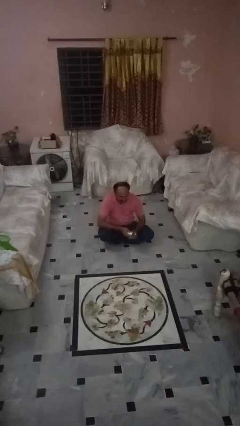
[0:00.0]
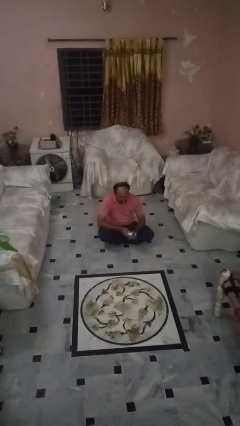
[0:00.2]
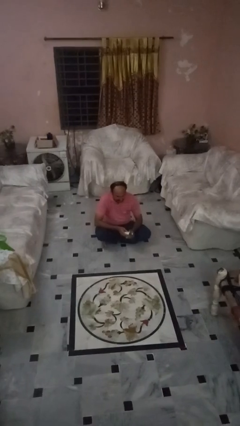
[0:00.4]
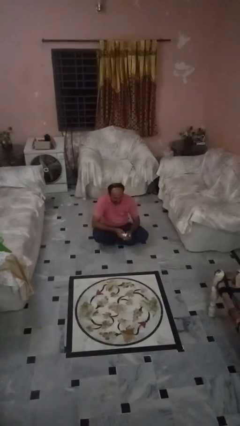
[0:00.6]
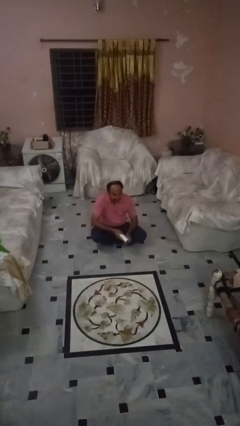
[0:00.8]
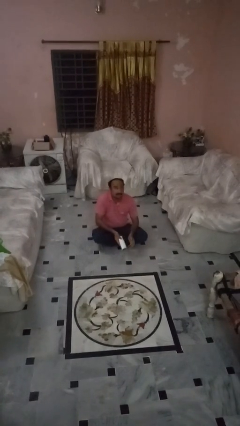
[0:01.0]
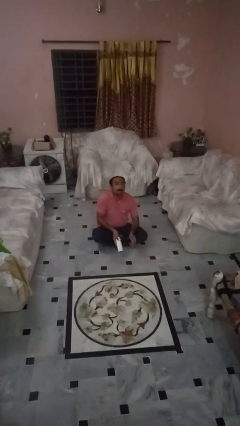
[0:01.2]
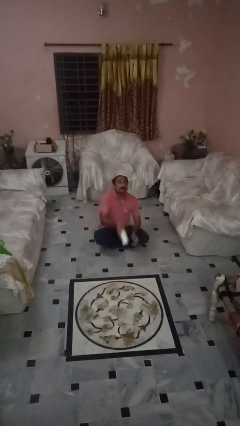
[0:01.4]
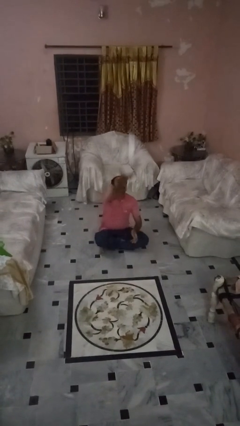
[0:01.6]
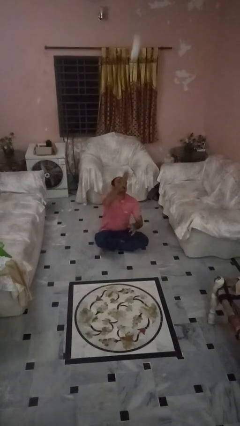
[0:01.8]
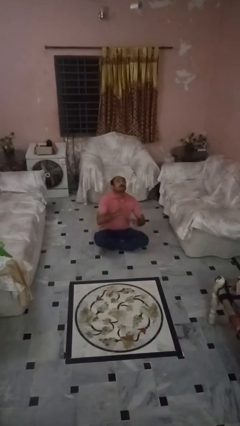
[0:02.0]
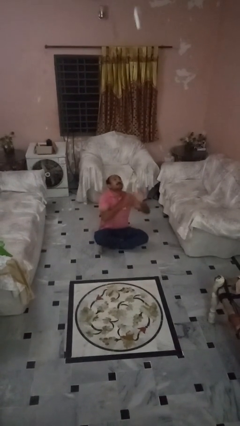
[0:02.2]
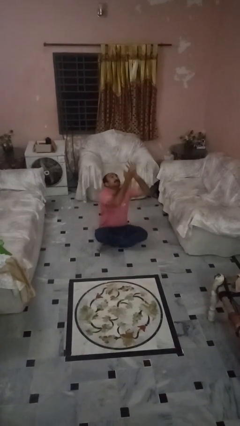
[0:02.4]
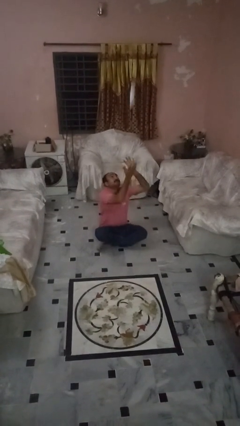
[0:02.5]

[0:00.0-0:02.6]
person drops object

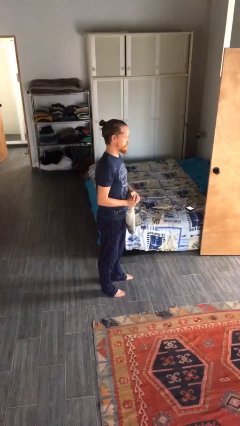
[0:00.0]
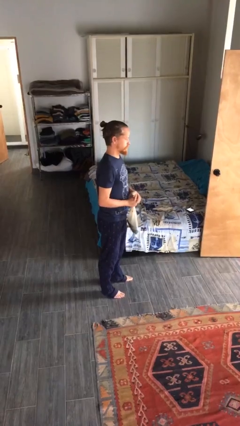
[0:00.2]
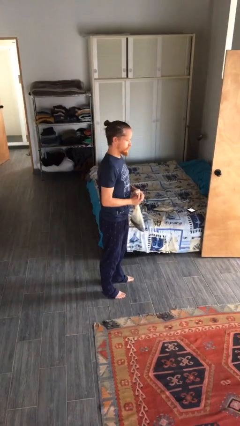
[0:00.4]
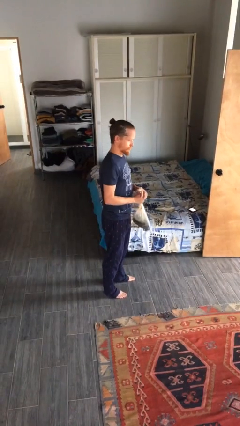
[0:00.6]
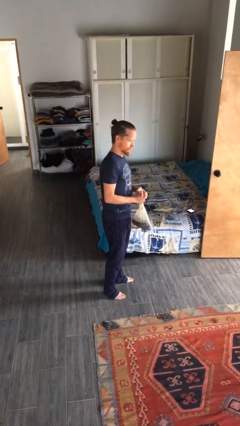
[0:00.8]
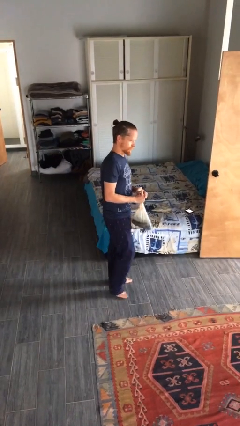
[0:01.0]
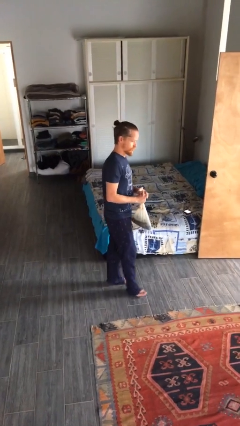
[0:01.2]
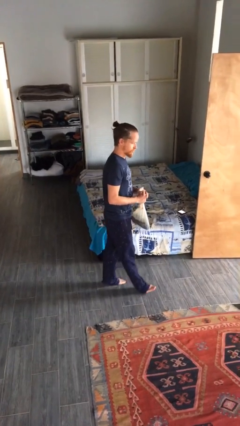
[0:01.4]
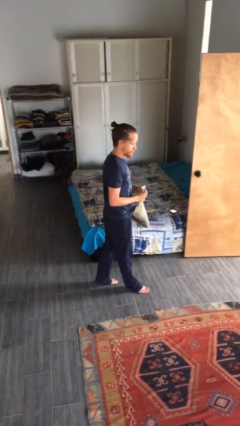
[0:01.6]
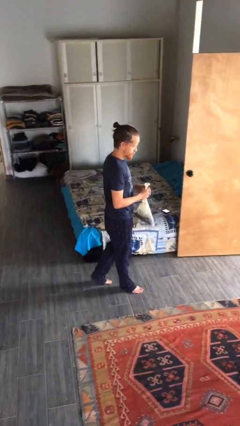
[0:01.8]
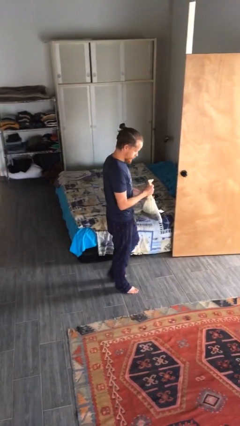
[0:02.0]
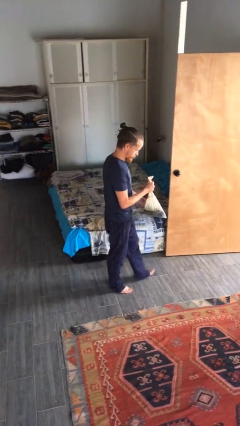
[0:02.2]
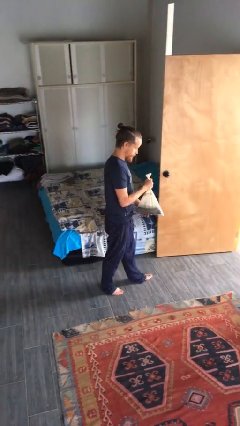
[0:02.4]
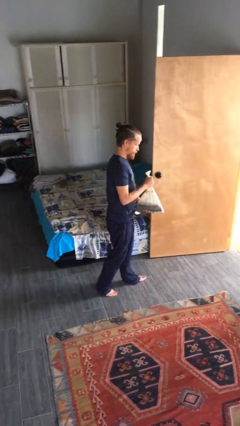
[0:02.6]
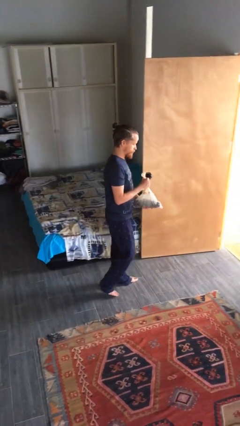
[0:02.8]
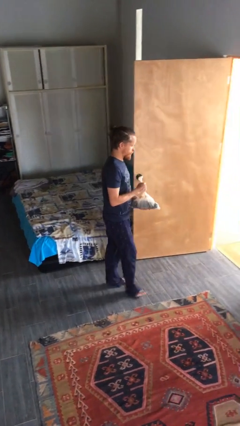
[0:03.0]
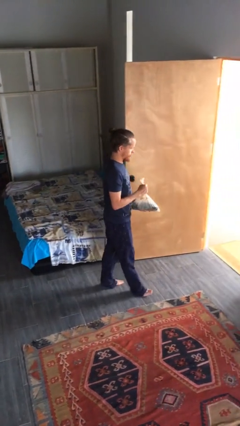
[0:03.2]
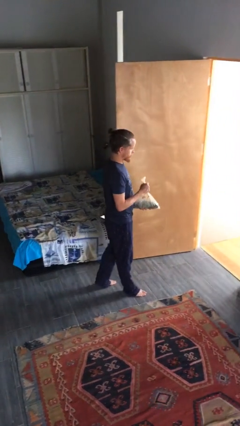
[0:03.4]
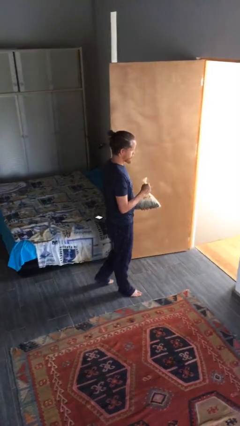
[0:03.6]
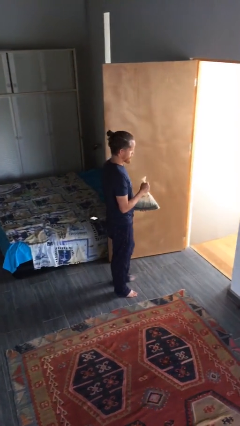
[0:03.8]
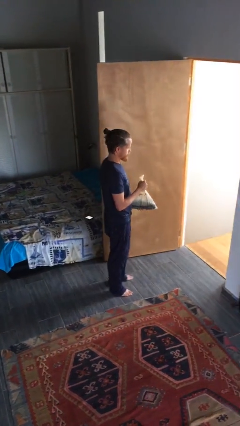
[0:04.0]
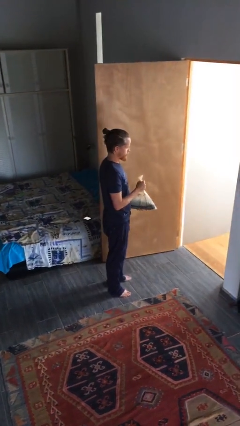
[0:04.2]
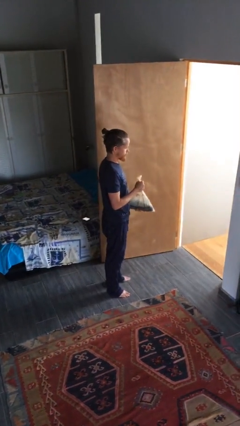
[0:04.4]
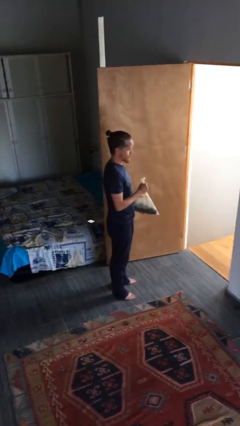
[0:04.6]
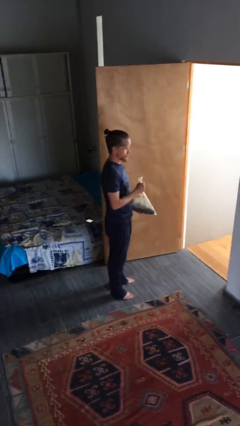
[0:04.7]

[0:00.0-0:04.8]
person carries groceries

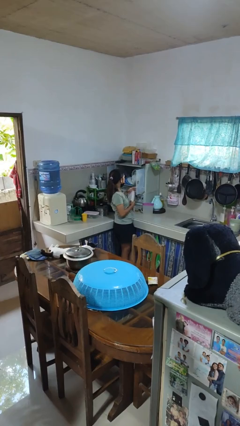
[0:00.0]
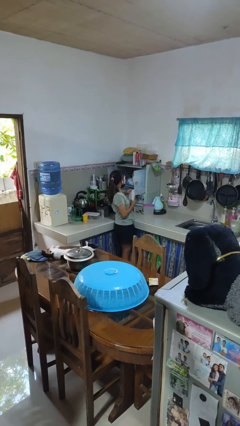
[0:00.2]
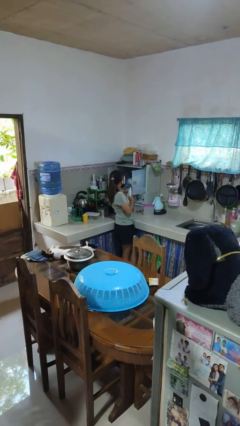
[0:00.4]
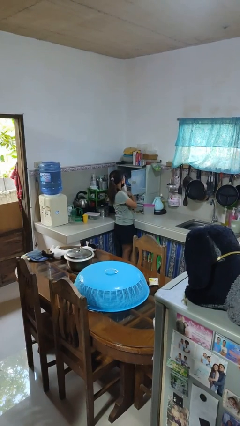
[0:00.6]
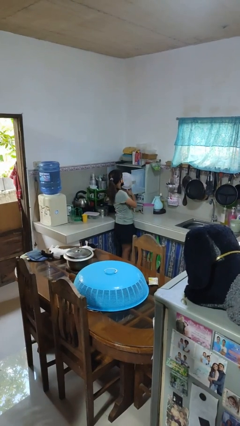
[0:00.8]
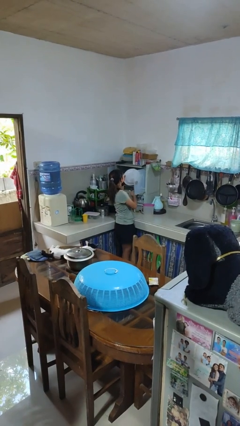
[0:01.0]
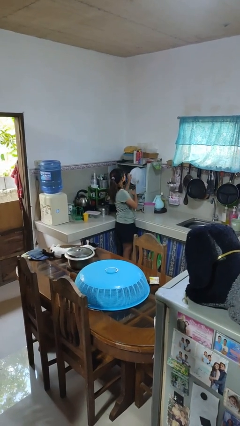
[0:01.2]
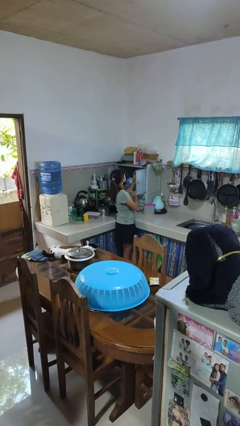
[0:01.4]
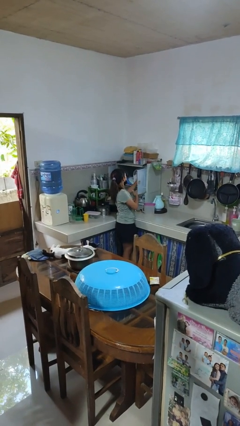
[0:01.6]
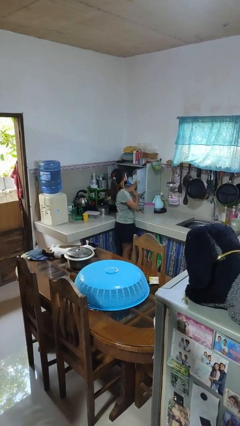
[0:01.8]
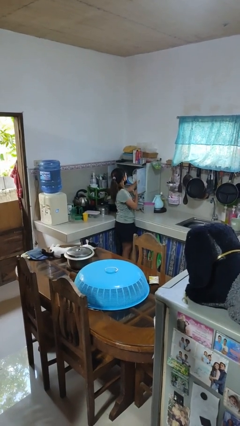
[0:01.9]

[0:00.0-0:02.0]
person puts object into kitchen drawer

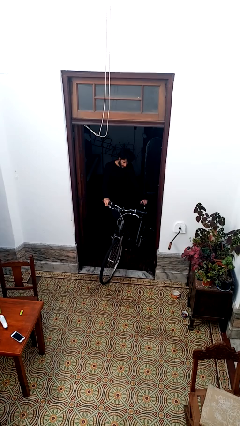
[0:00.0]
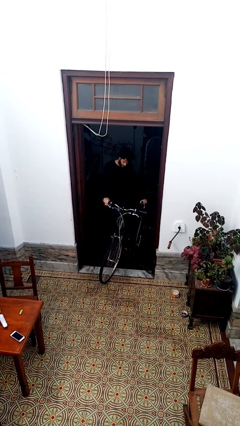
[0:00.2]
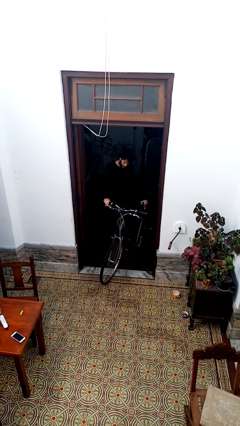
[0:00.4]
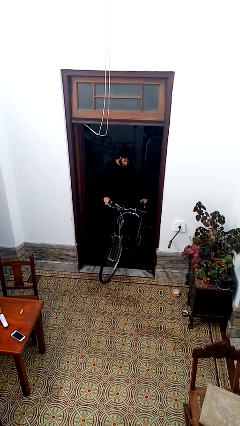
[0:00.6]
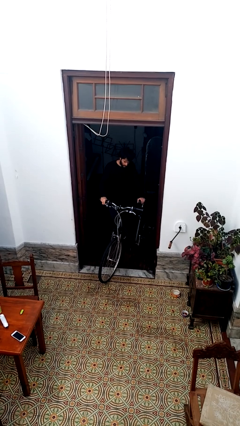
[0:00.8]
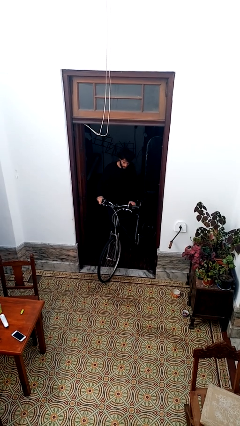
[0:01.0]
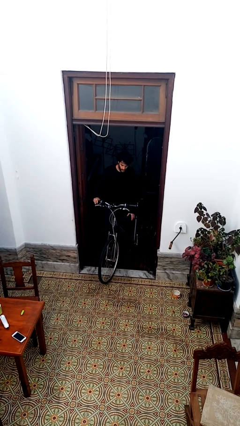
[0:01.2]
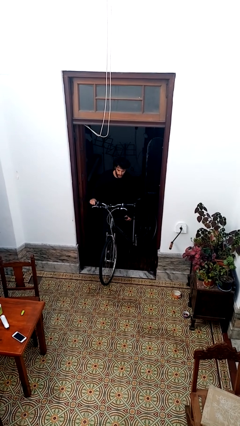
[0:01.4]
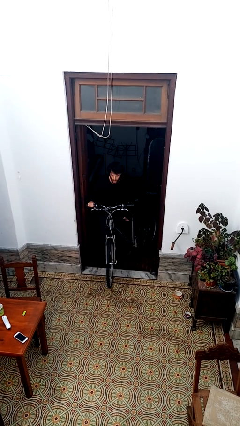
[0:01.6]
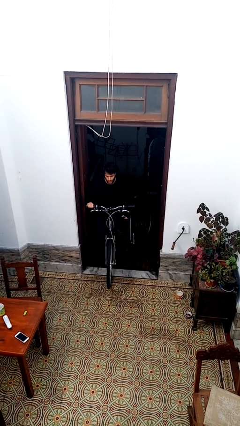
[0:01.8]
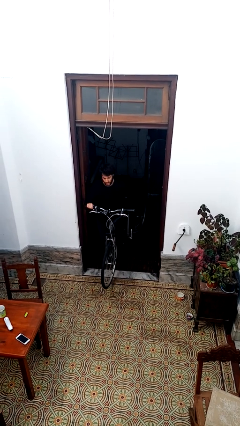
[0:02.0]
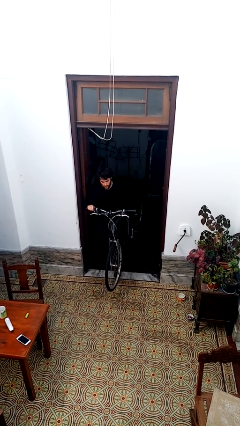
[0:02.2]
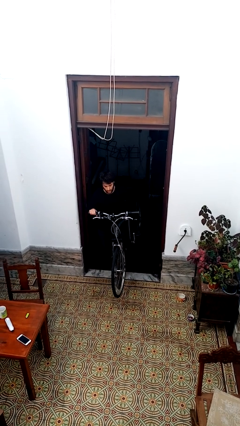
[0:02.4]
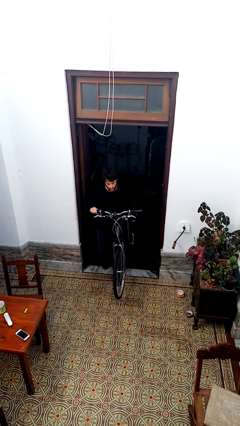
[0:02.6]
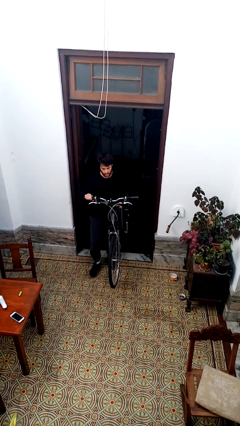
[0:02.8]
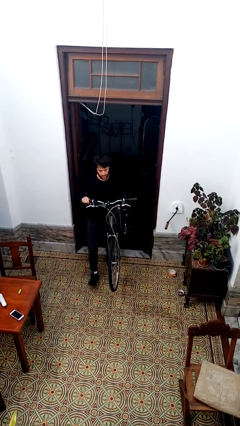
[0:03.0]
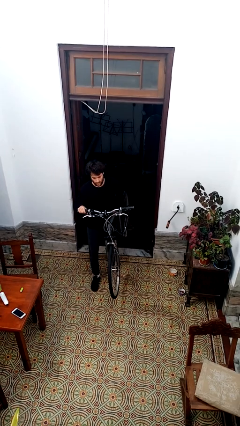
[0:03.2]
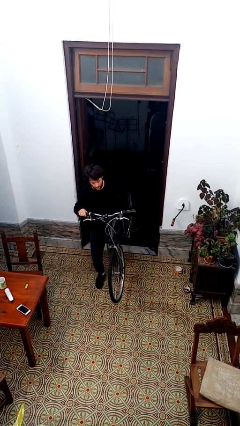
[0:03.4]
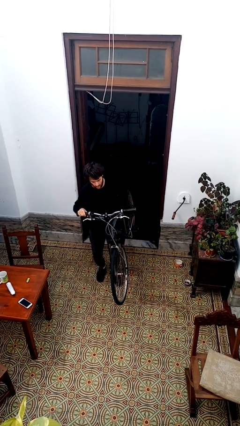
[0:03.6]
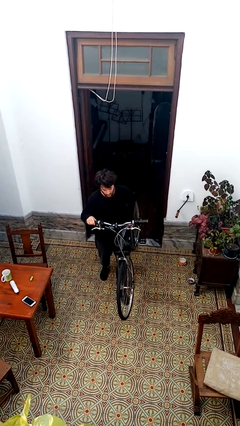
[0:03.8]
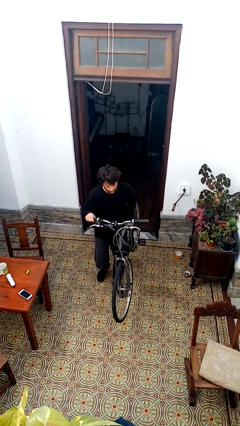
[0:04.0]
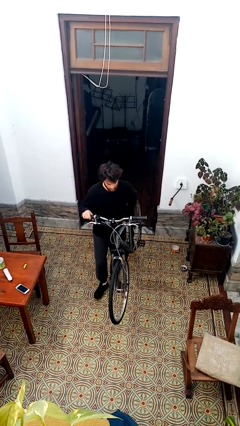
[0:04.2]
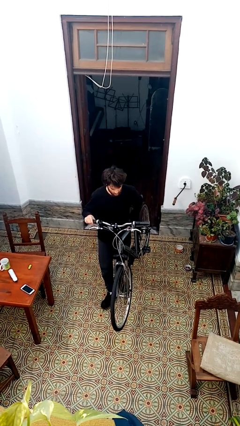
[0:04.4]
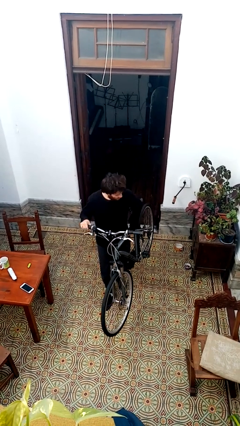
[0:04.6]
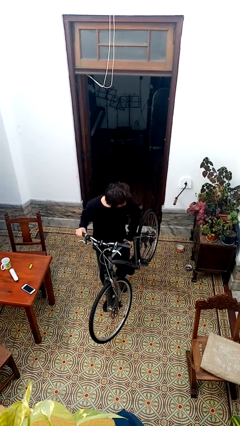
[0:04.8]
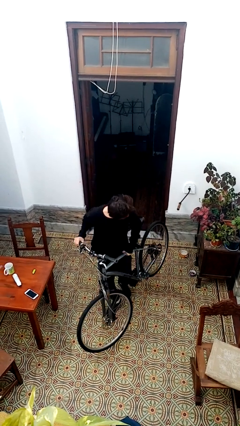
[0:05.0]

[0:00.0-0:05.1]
person carries bicycle

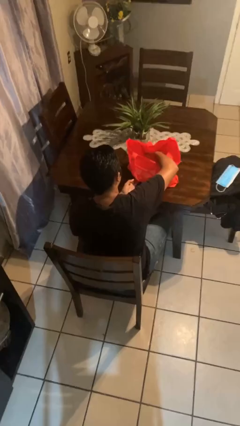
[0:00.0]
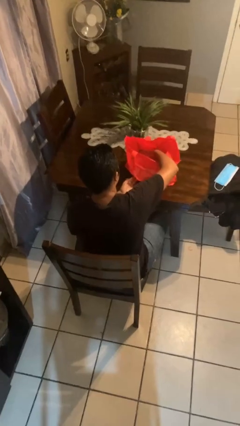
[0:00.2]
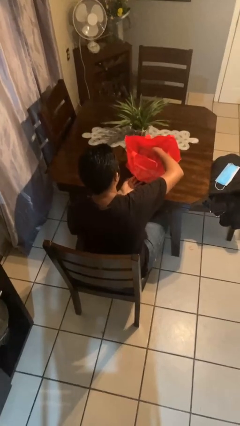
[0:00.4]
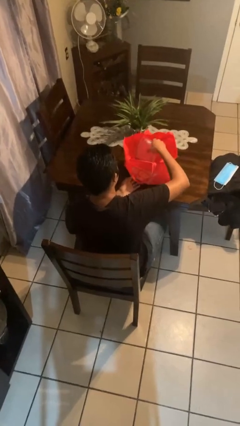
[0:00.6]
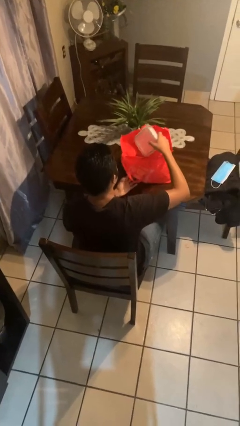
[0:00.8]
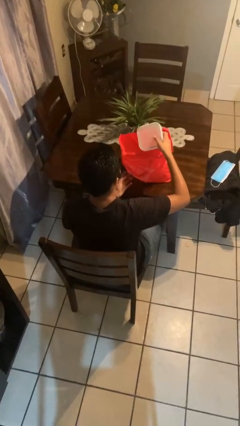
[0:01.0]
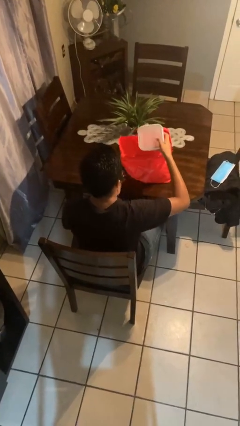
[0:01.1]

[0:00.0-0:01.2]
person takes object from bag

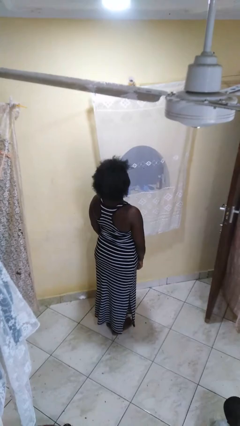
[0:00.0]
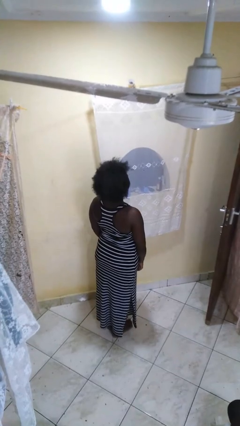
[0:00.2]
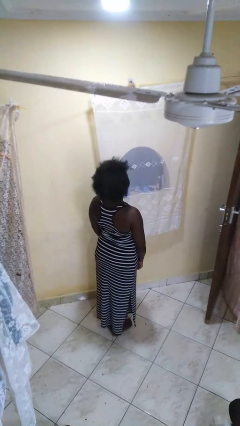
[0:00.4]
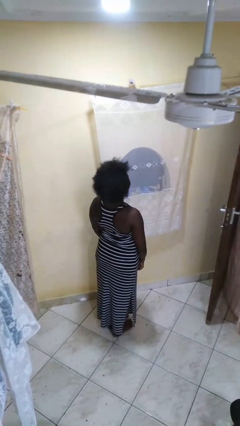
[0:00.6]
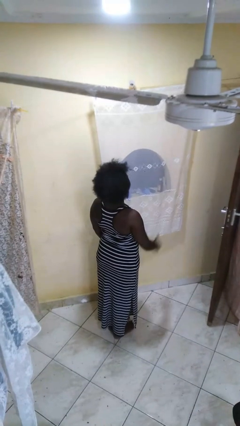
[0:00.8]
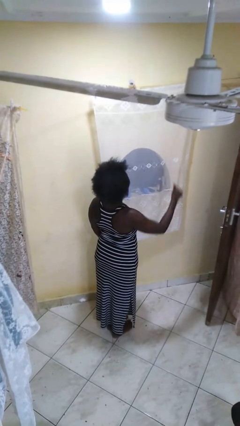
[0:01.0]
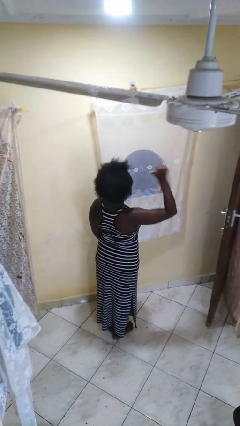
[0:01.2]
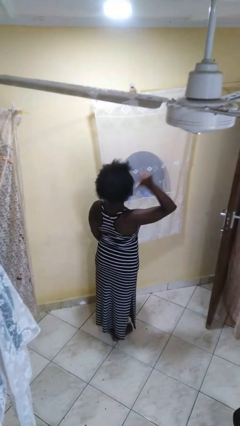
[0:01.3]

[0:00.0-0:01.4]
person gestures behind me

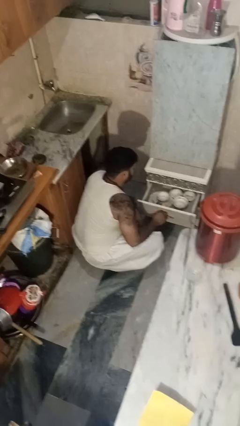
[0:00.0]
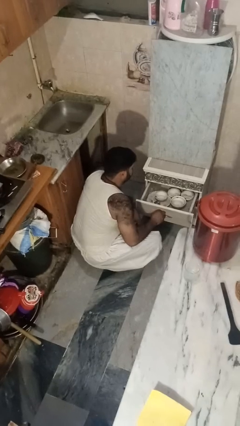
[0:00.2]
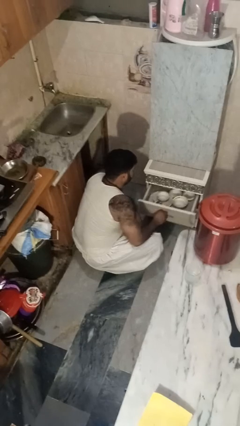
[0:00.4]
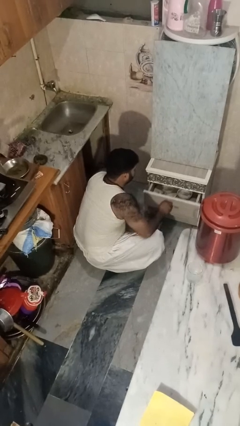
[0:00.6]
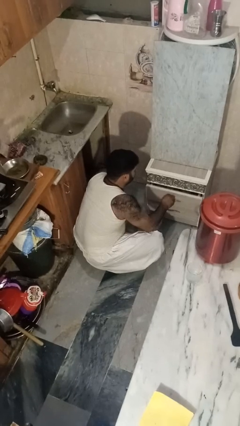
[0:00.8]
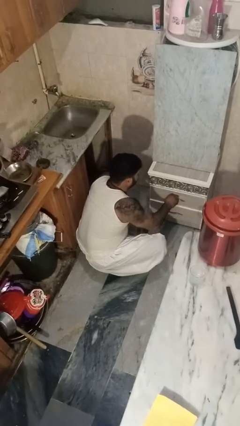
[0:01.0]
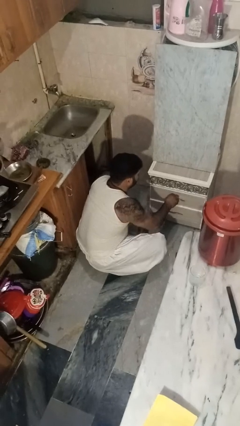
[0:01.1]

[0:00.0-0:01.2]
person closes kitchen drawer
